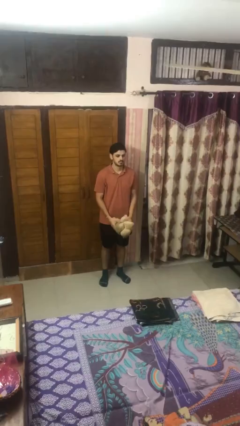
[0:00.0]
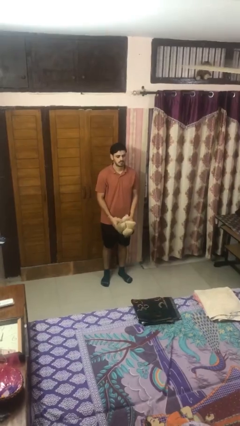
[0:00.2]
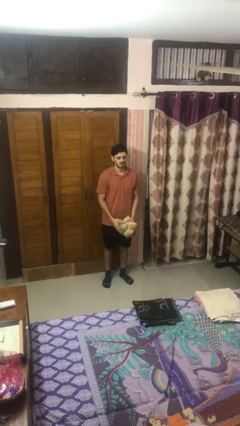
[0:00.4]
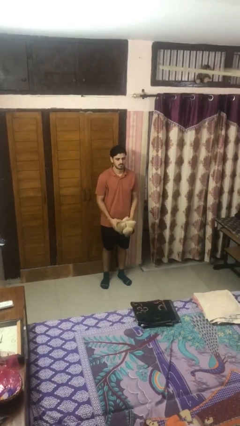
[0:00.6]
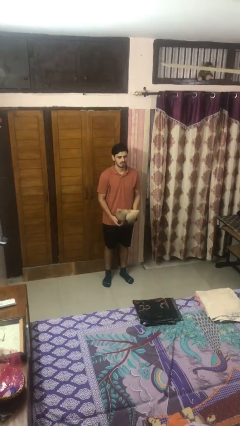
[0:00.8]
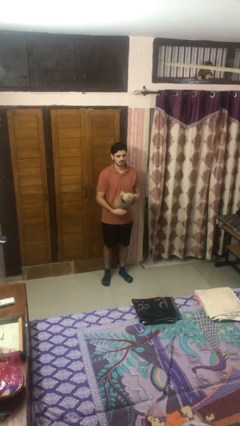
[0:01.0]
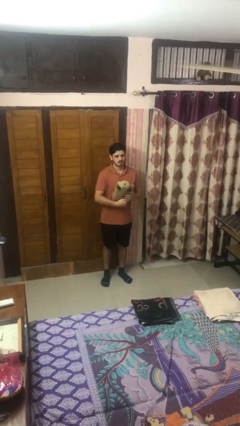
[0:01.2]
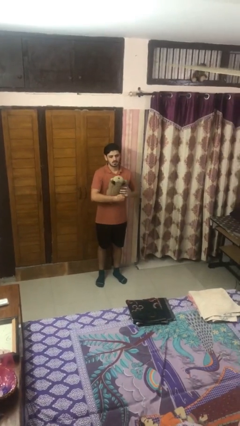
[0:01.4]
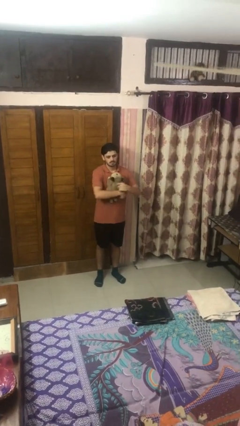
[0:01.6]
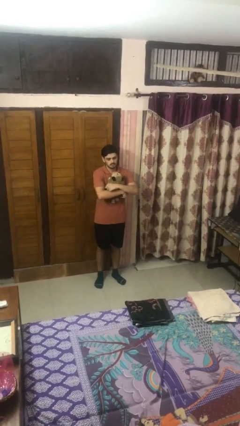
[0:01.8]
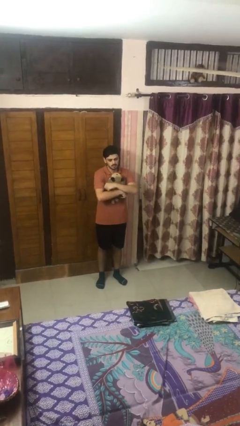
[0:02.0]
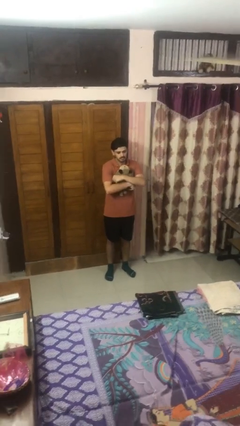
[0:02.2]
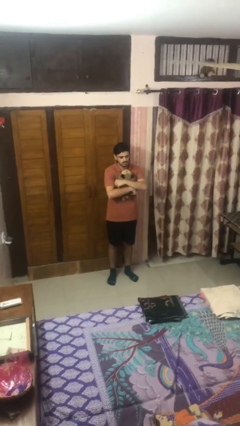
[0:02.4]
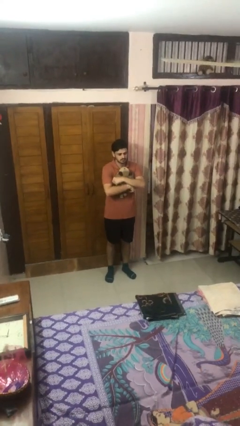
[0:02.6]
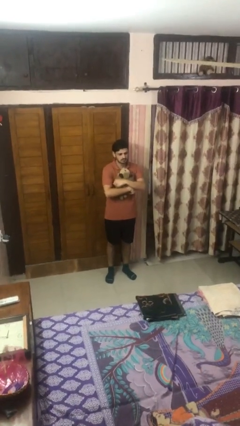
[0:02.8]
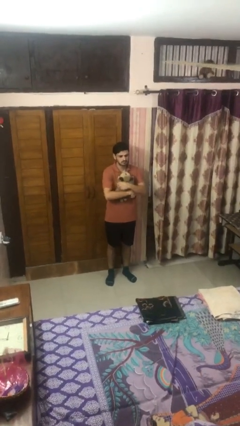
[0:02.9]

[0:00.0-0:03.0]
person hugs stuffed animal

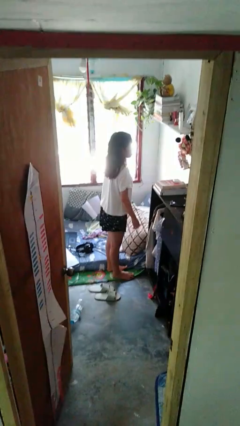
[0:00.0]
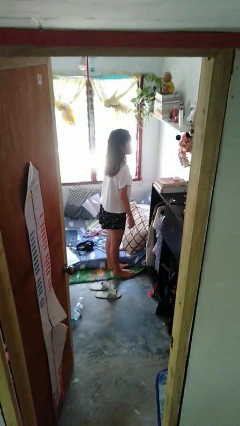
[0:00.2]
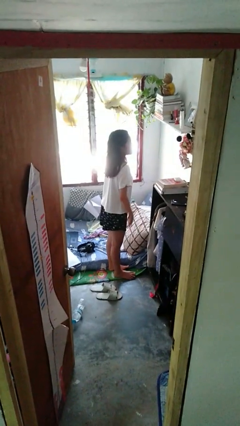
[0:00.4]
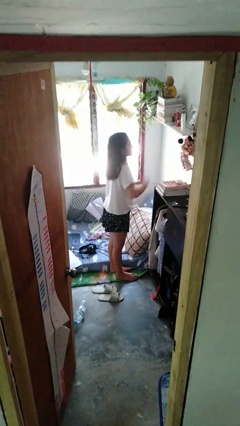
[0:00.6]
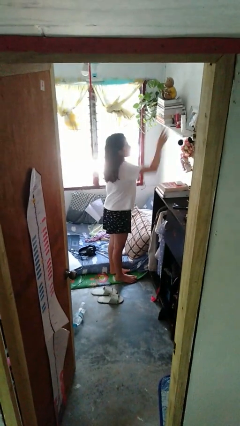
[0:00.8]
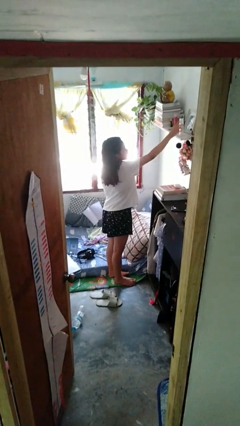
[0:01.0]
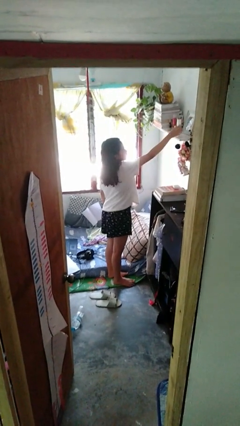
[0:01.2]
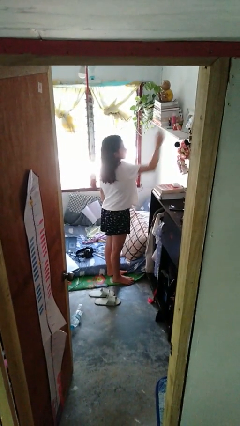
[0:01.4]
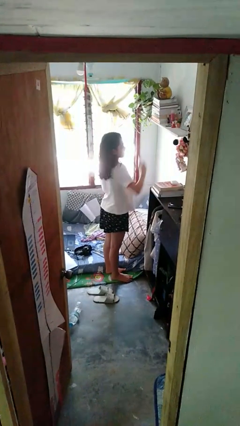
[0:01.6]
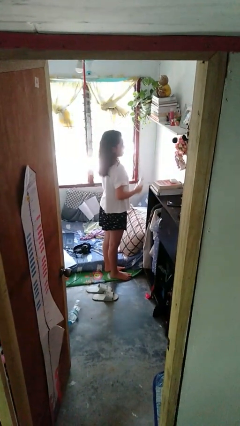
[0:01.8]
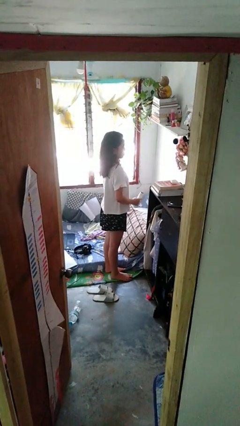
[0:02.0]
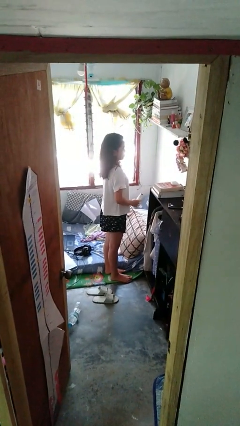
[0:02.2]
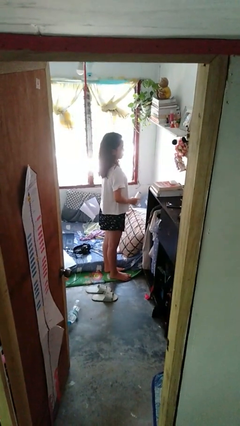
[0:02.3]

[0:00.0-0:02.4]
person picks up object from shelf

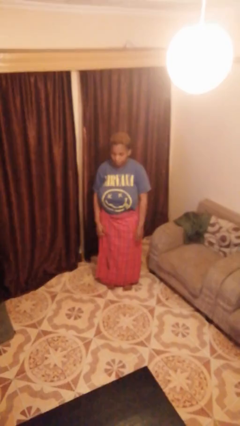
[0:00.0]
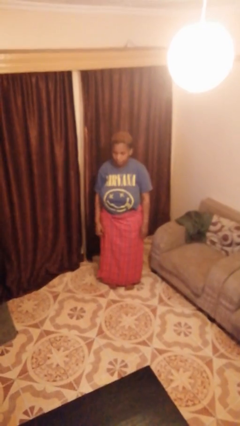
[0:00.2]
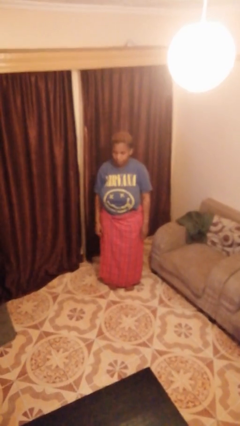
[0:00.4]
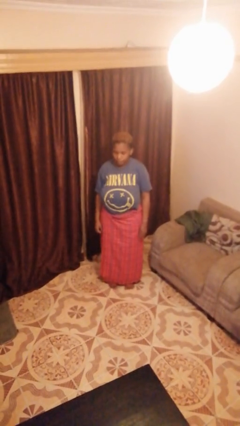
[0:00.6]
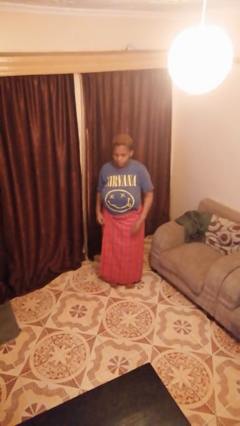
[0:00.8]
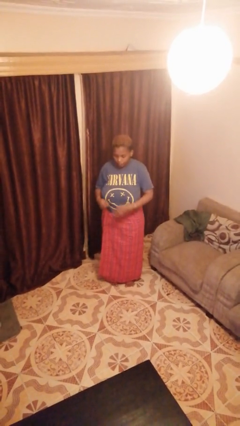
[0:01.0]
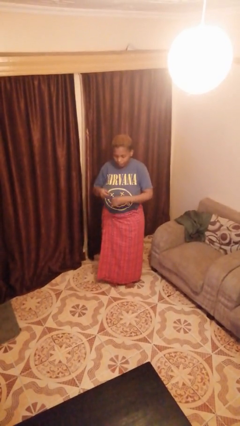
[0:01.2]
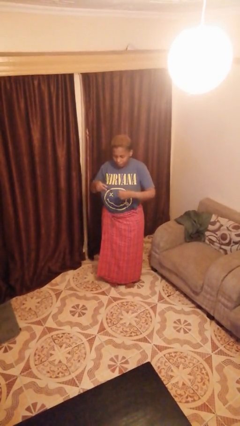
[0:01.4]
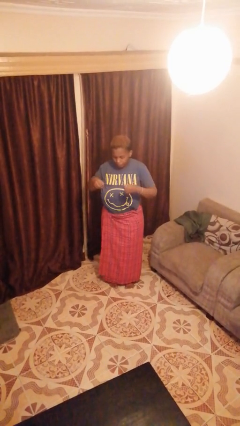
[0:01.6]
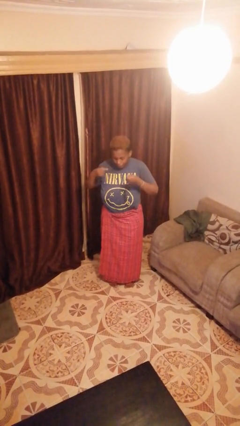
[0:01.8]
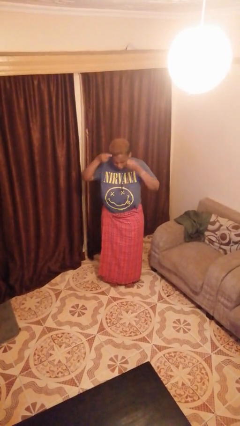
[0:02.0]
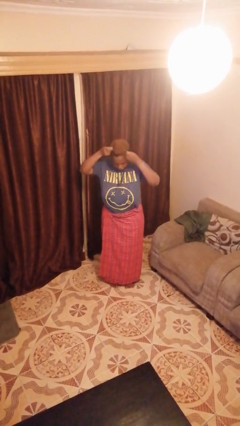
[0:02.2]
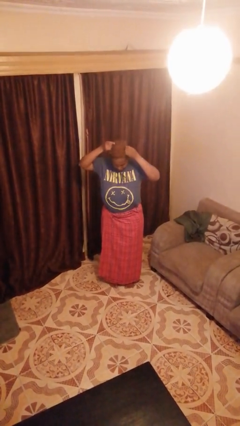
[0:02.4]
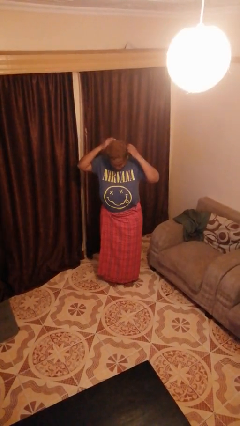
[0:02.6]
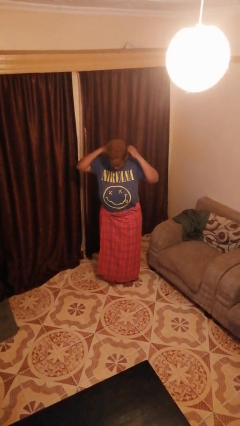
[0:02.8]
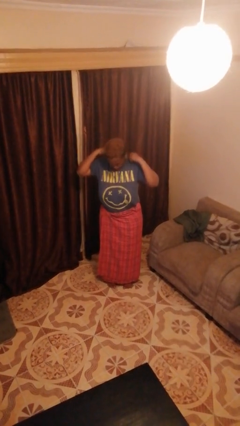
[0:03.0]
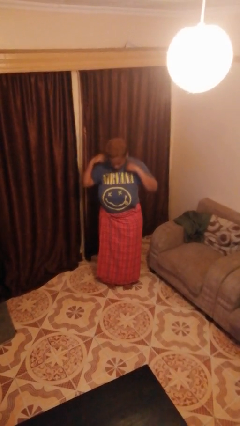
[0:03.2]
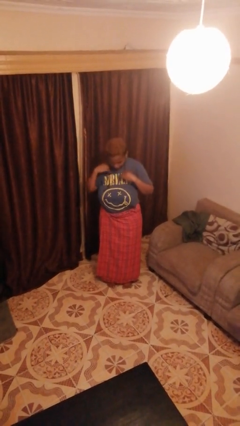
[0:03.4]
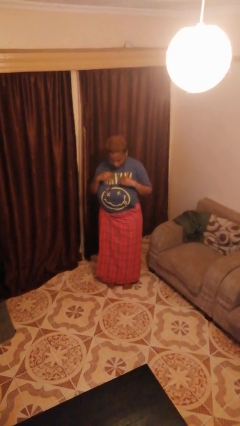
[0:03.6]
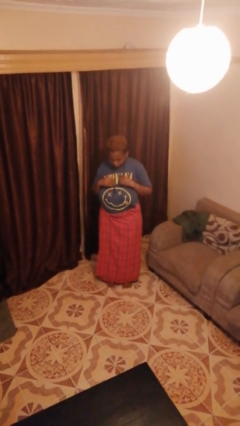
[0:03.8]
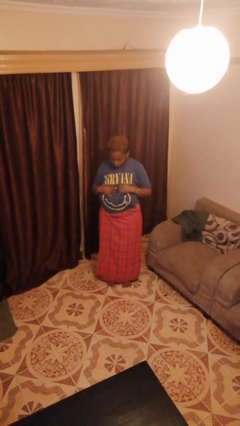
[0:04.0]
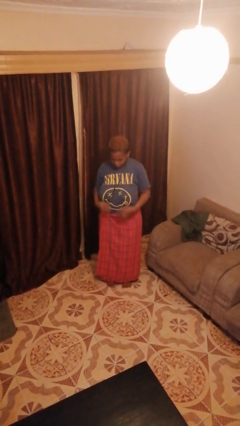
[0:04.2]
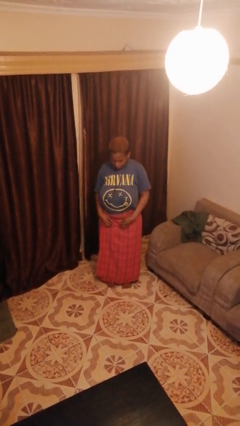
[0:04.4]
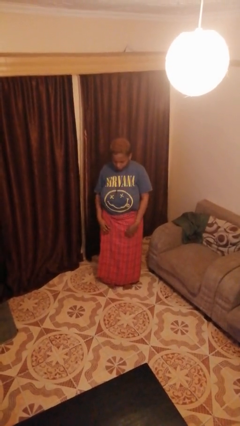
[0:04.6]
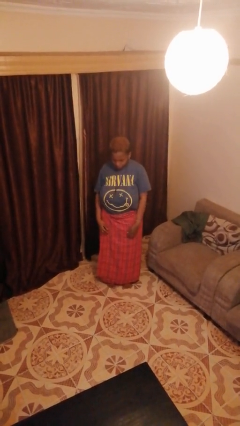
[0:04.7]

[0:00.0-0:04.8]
person puts on necklace

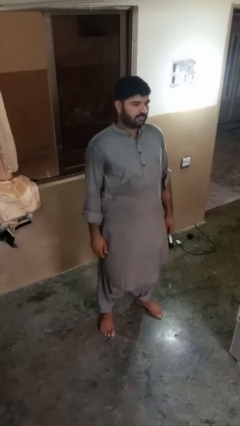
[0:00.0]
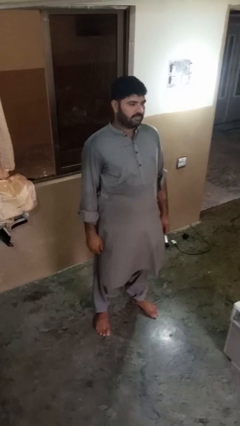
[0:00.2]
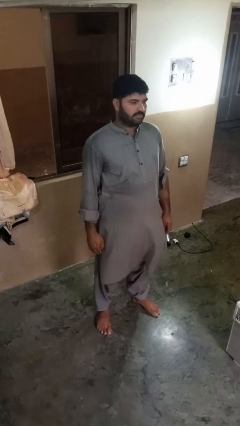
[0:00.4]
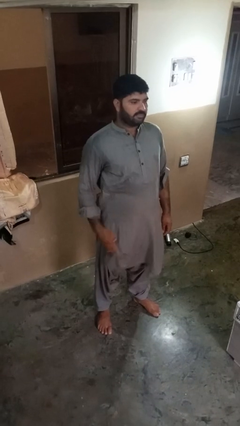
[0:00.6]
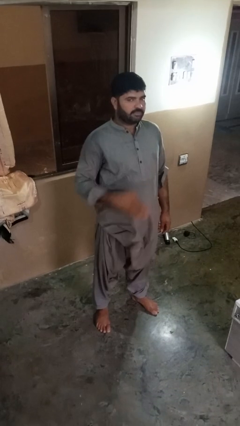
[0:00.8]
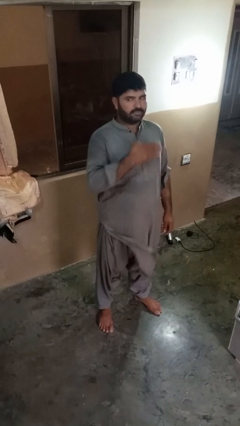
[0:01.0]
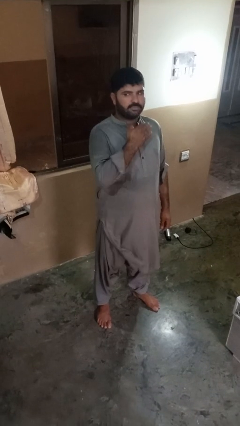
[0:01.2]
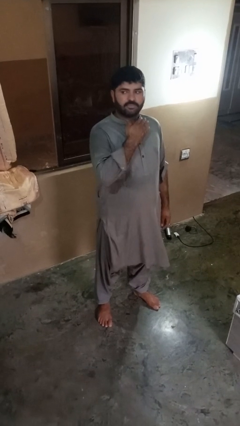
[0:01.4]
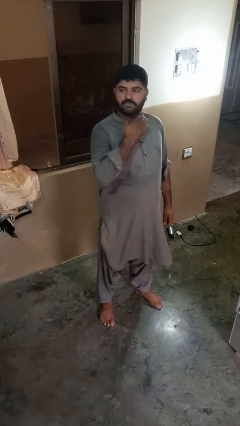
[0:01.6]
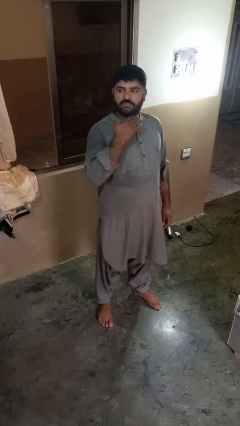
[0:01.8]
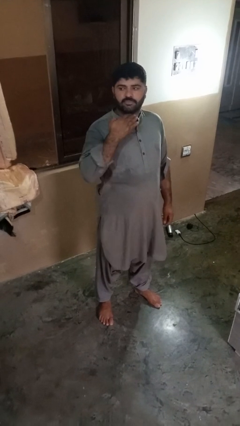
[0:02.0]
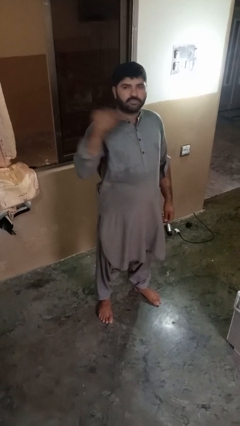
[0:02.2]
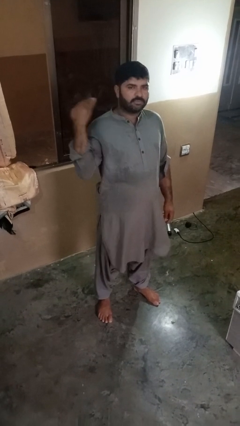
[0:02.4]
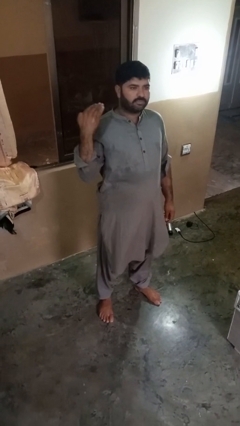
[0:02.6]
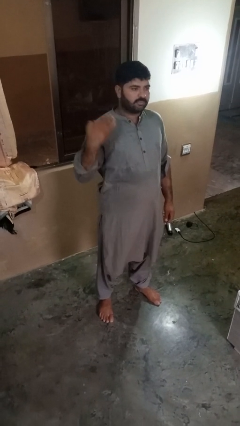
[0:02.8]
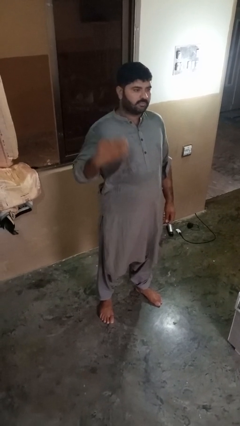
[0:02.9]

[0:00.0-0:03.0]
person gestures cut

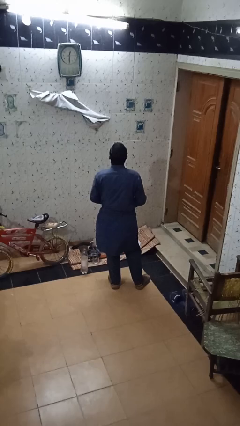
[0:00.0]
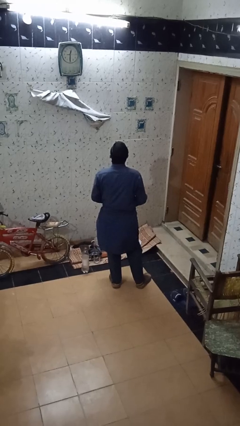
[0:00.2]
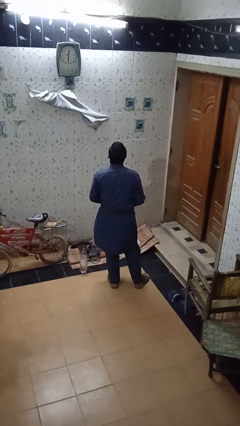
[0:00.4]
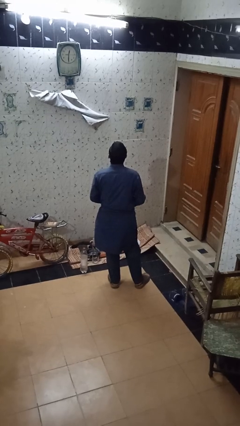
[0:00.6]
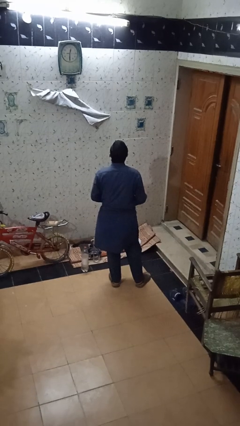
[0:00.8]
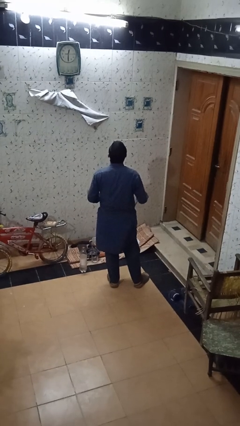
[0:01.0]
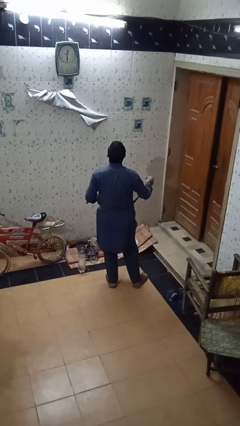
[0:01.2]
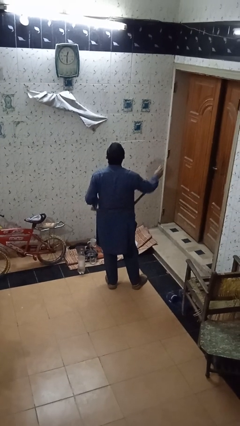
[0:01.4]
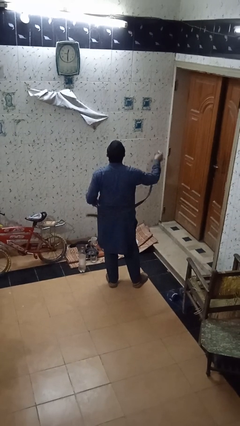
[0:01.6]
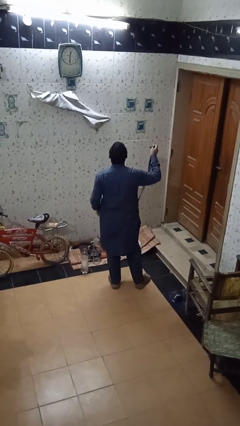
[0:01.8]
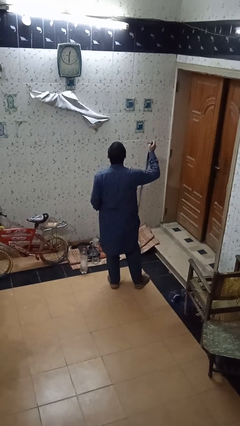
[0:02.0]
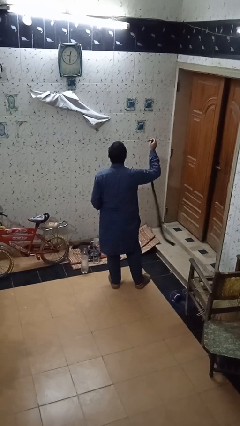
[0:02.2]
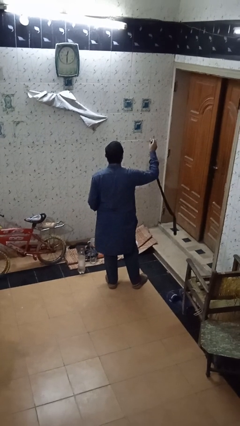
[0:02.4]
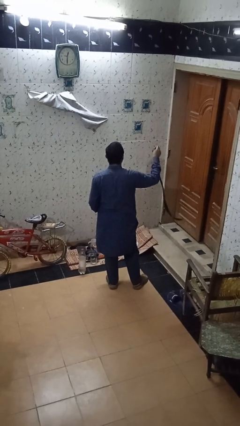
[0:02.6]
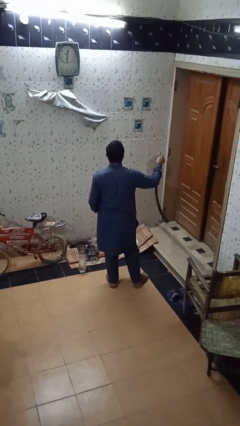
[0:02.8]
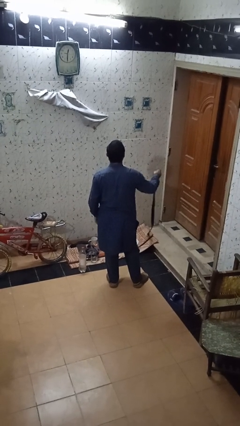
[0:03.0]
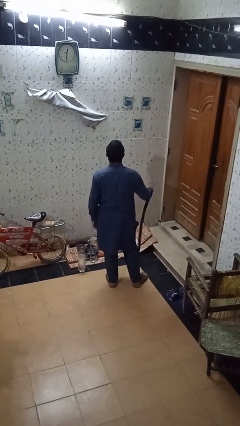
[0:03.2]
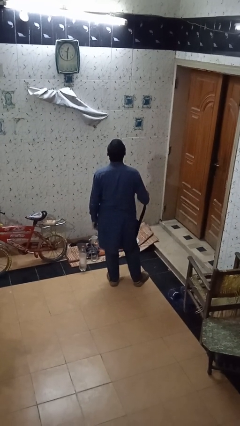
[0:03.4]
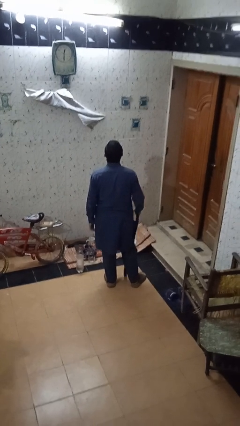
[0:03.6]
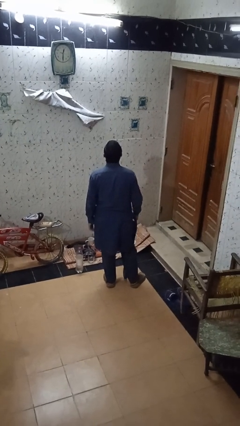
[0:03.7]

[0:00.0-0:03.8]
person takes off belt

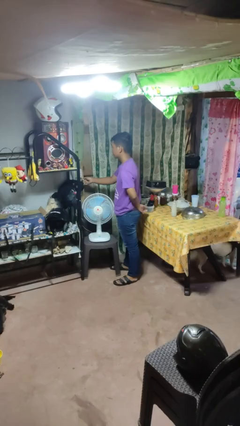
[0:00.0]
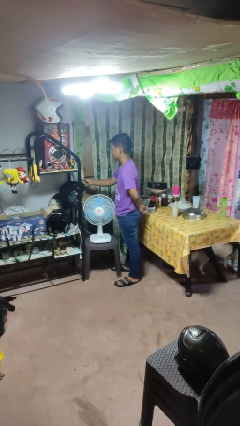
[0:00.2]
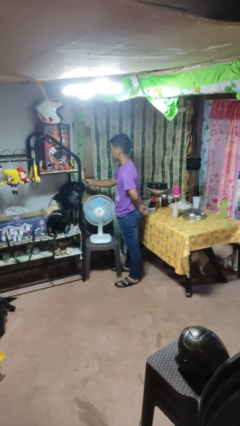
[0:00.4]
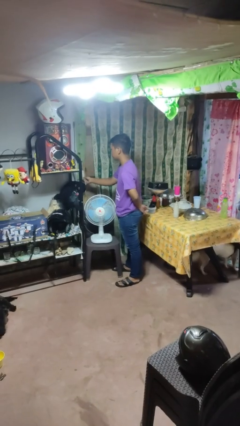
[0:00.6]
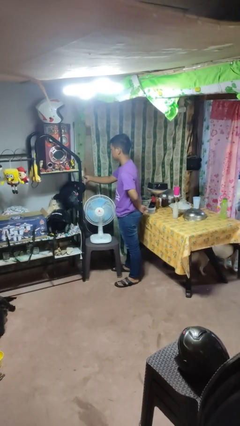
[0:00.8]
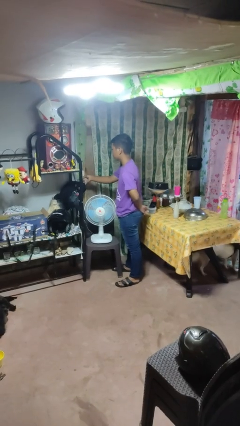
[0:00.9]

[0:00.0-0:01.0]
person plugs into electrical socket
